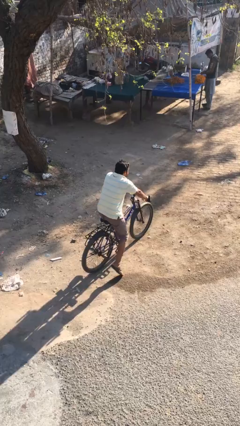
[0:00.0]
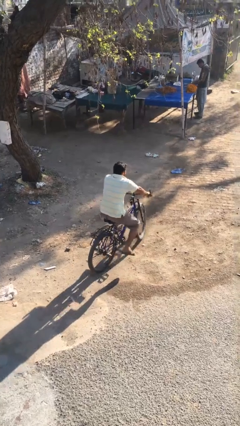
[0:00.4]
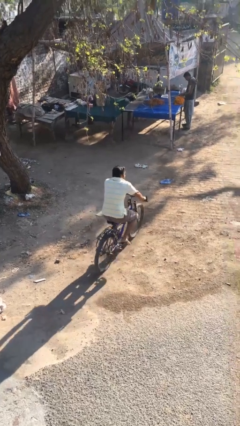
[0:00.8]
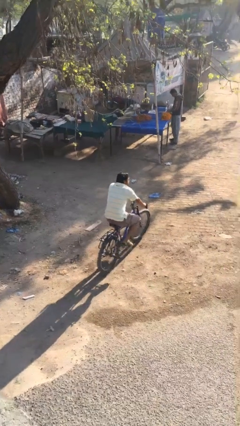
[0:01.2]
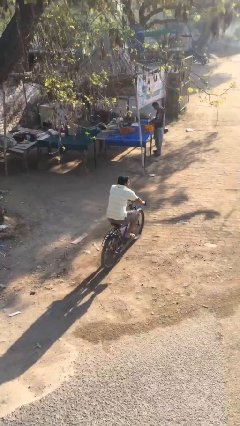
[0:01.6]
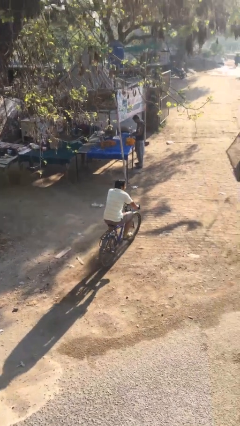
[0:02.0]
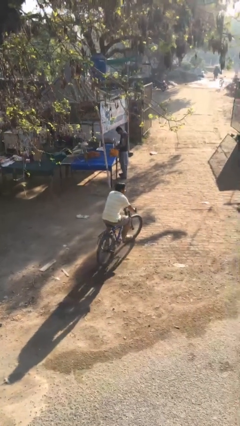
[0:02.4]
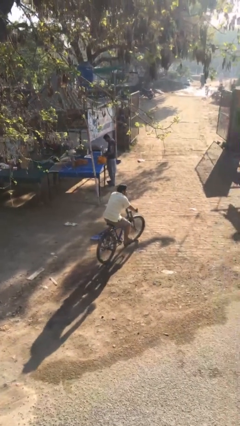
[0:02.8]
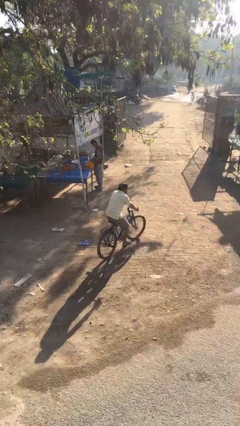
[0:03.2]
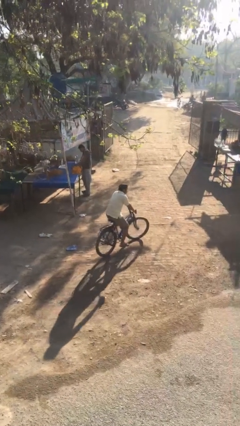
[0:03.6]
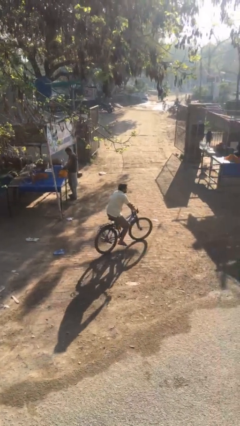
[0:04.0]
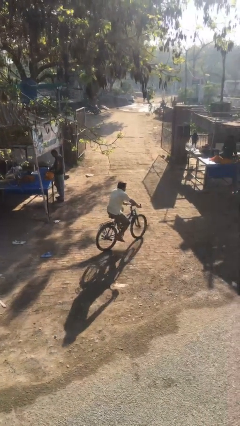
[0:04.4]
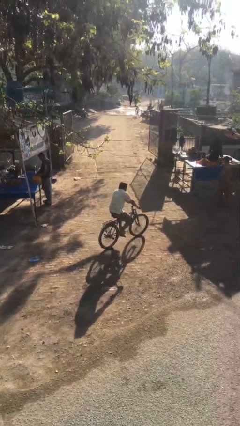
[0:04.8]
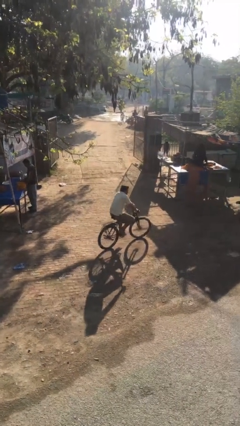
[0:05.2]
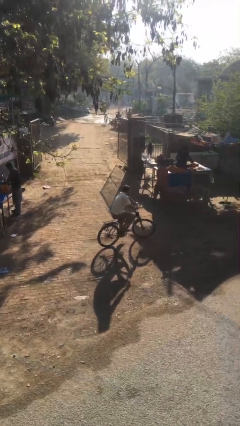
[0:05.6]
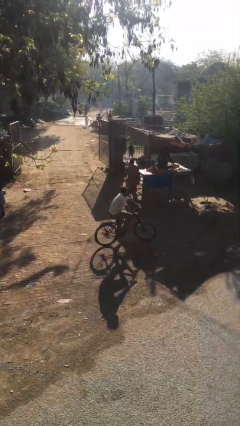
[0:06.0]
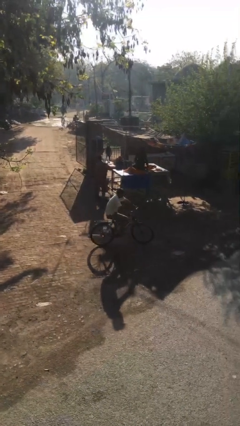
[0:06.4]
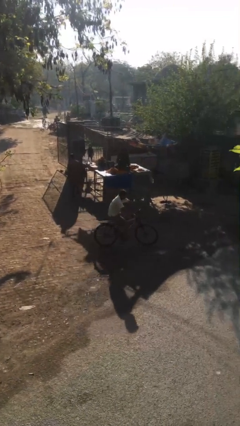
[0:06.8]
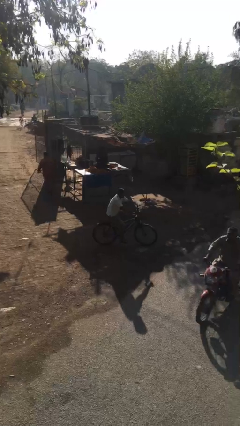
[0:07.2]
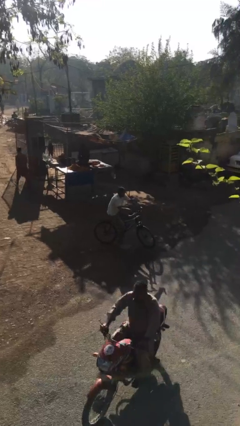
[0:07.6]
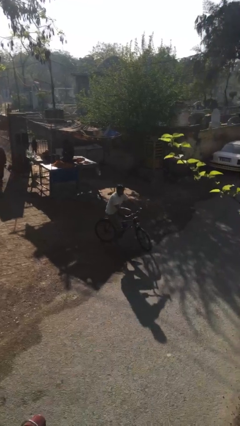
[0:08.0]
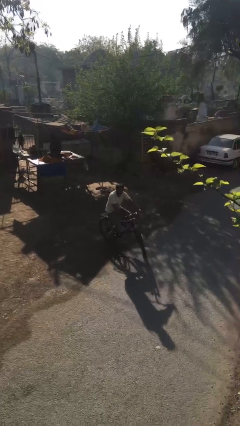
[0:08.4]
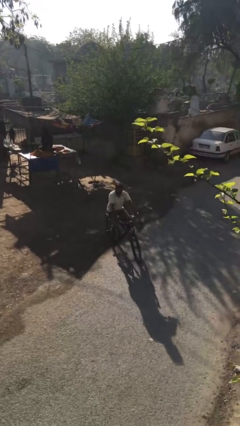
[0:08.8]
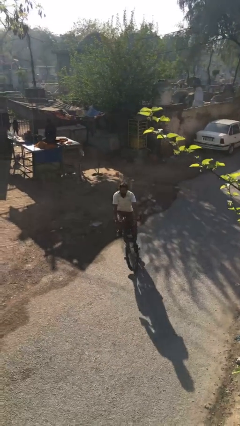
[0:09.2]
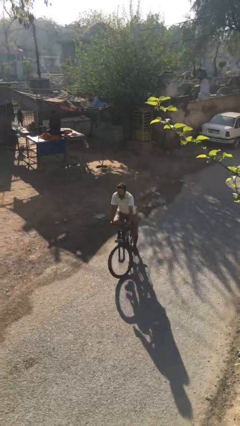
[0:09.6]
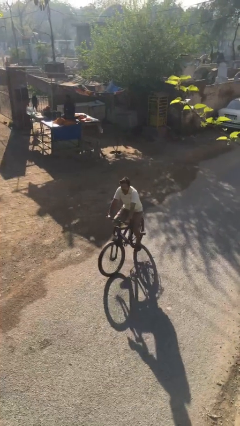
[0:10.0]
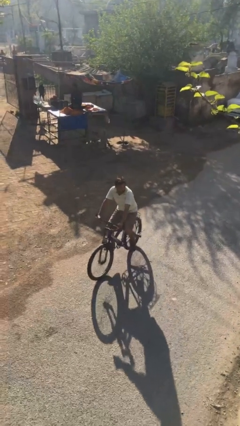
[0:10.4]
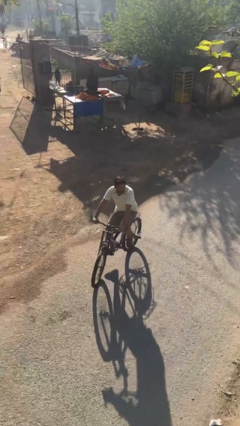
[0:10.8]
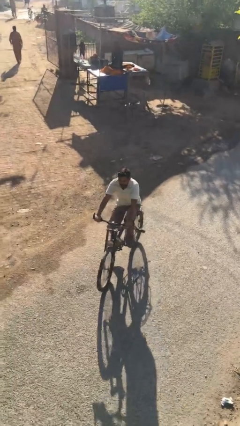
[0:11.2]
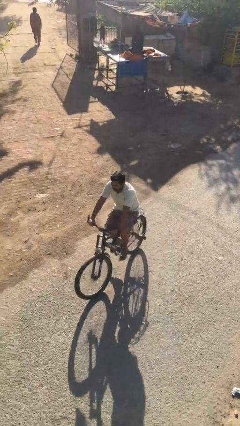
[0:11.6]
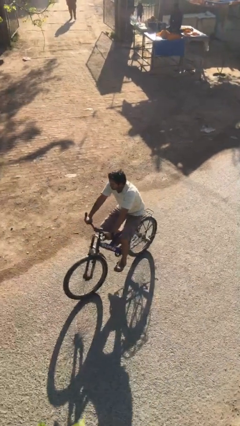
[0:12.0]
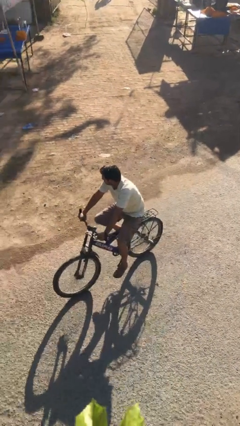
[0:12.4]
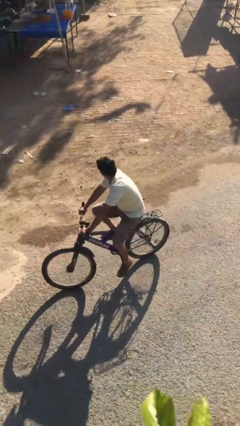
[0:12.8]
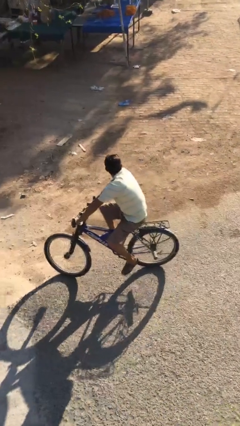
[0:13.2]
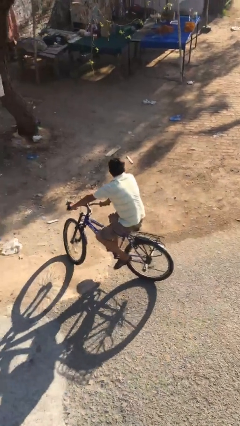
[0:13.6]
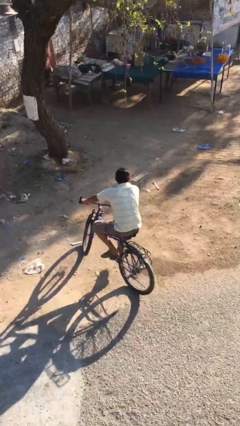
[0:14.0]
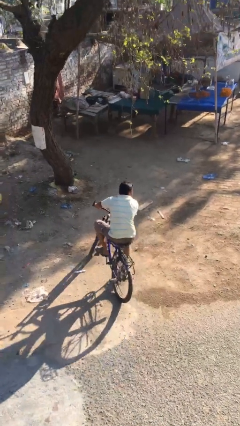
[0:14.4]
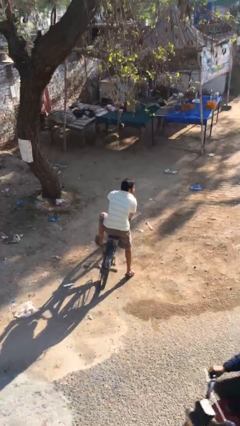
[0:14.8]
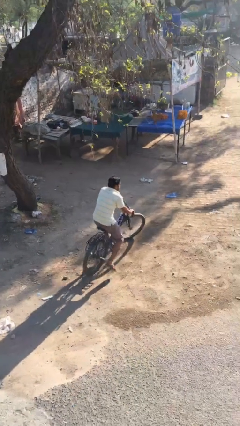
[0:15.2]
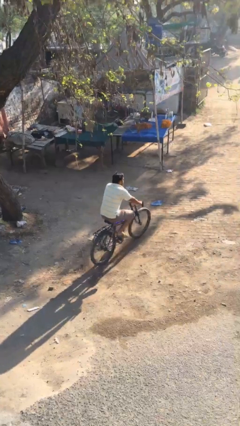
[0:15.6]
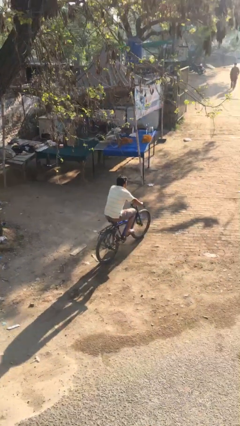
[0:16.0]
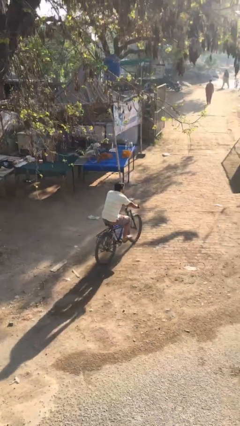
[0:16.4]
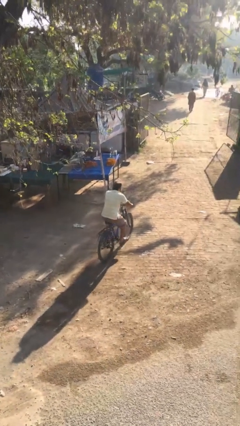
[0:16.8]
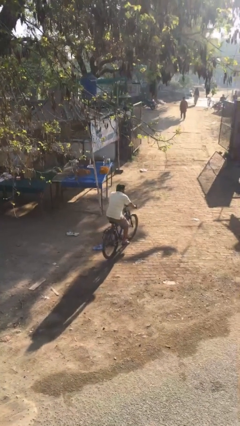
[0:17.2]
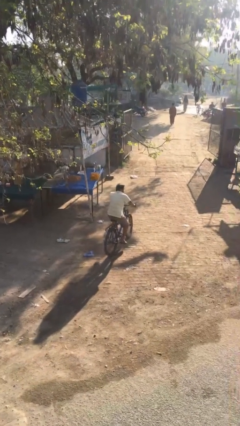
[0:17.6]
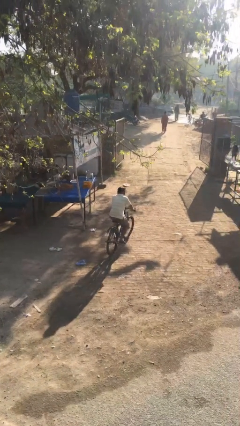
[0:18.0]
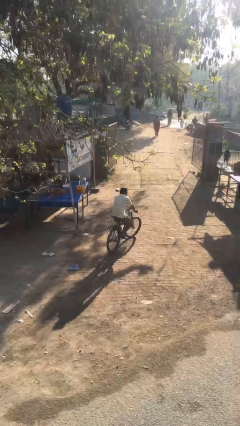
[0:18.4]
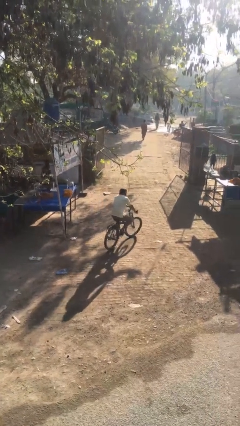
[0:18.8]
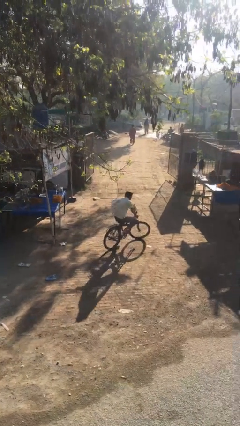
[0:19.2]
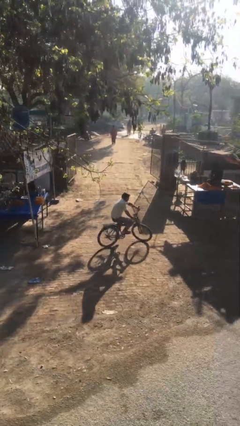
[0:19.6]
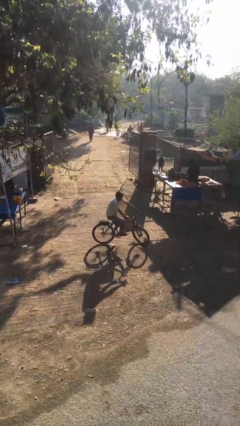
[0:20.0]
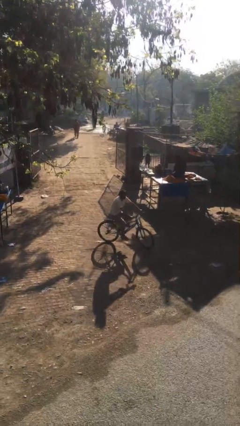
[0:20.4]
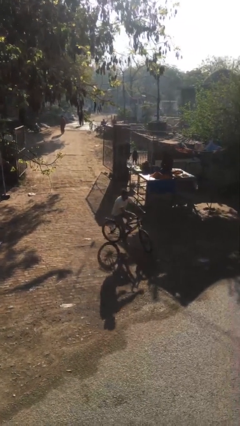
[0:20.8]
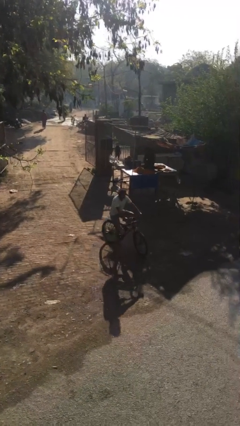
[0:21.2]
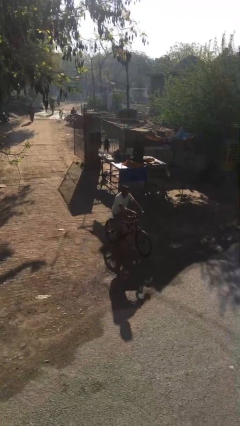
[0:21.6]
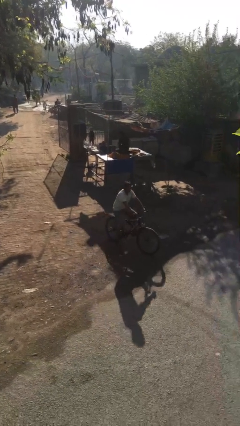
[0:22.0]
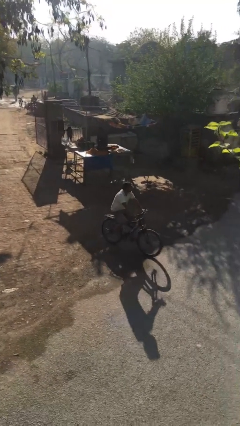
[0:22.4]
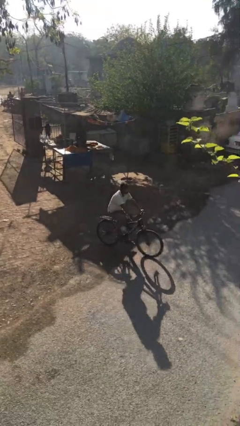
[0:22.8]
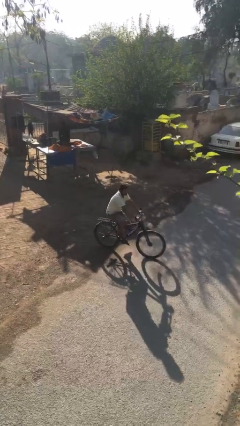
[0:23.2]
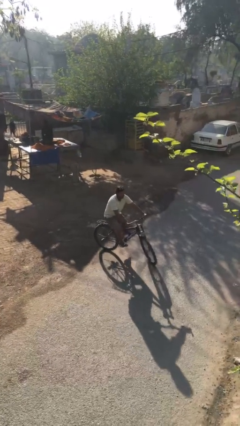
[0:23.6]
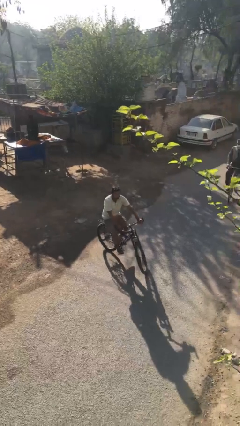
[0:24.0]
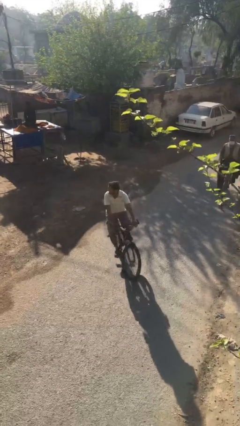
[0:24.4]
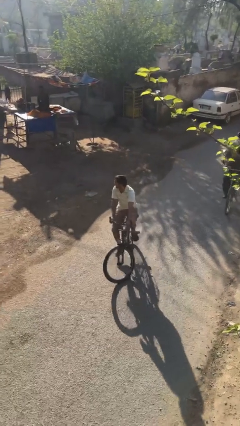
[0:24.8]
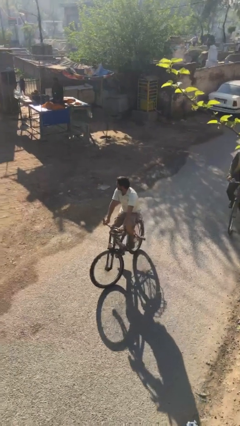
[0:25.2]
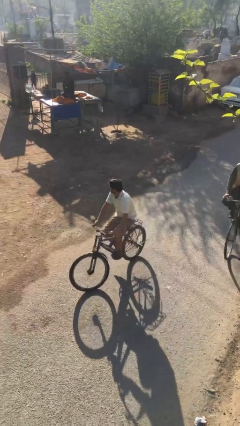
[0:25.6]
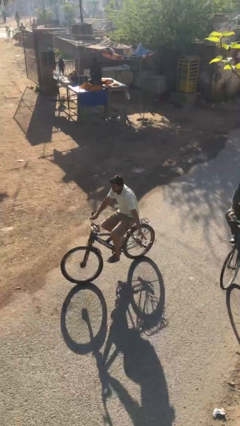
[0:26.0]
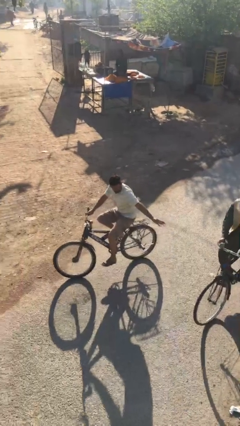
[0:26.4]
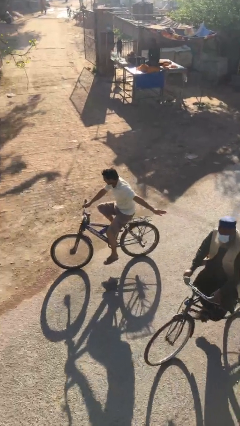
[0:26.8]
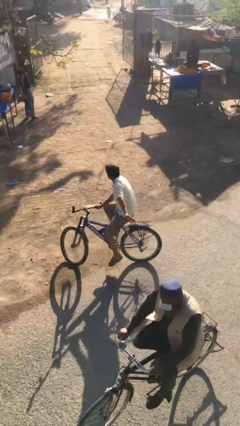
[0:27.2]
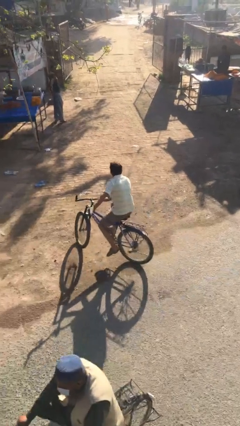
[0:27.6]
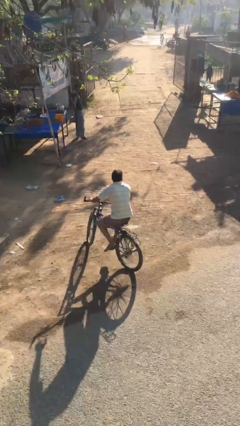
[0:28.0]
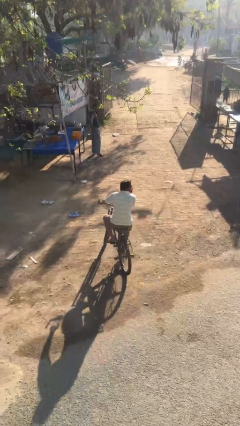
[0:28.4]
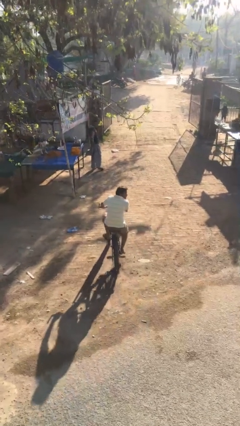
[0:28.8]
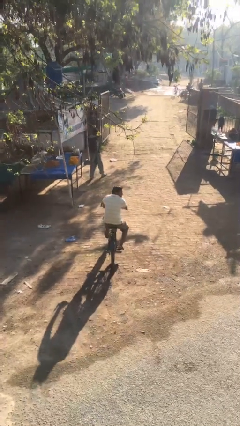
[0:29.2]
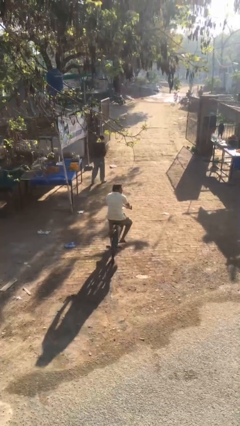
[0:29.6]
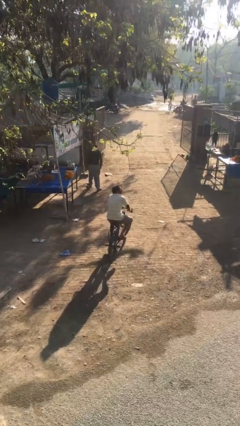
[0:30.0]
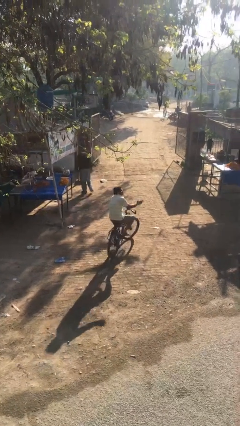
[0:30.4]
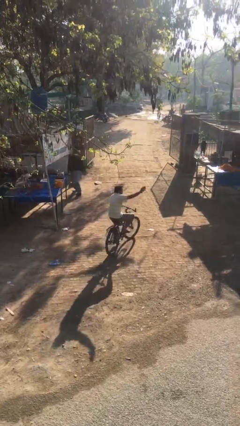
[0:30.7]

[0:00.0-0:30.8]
person rides bicycle

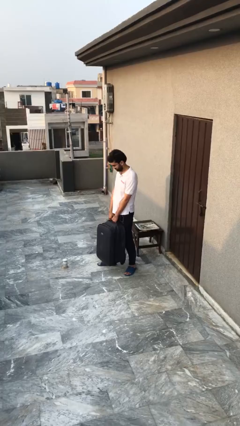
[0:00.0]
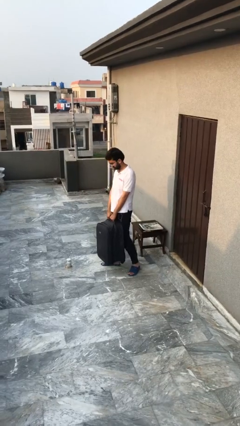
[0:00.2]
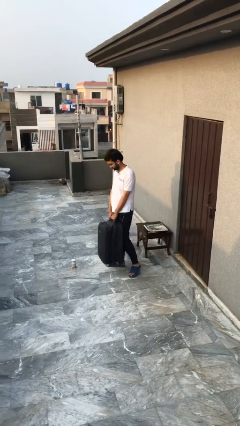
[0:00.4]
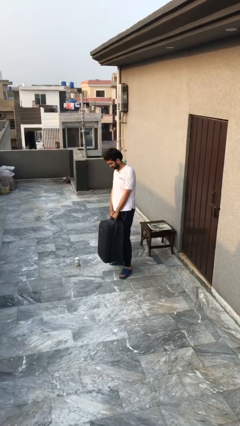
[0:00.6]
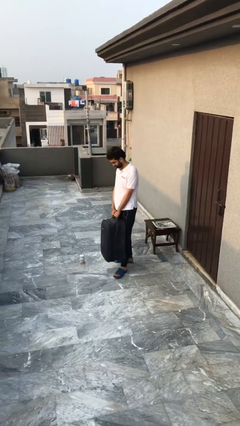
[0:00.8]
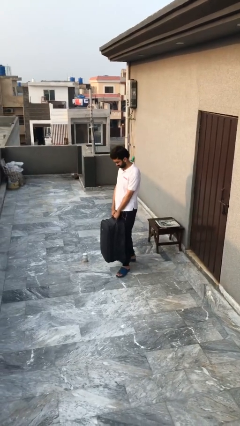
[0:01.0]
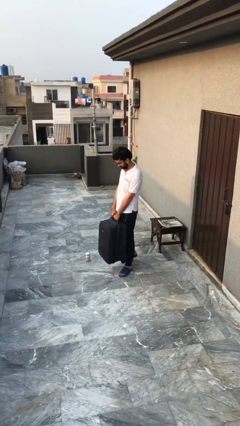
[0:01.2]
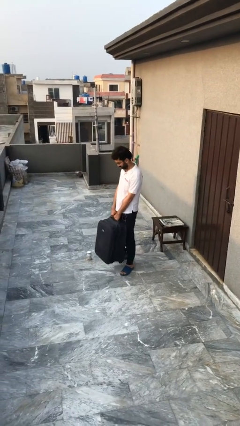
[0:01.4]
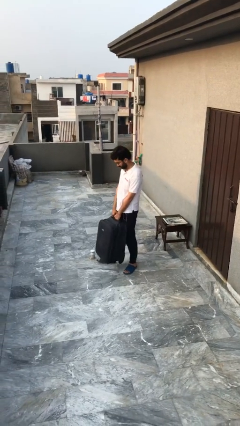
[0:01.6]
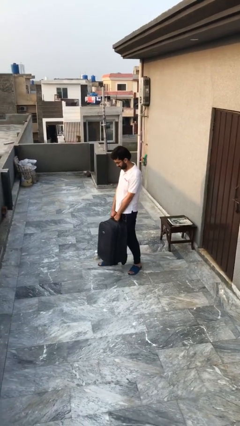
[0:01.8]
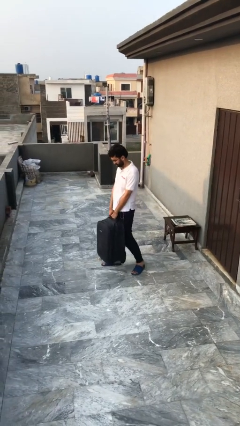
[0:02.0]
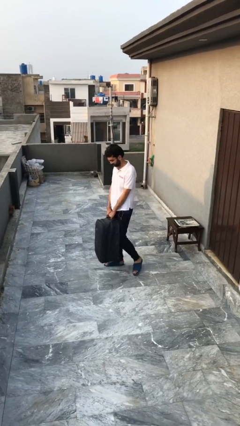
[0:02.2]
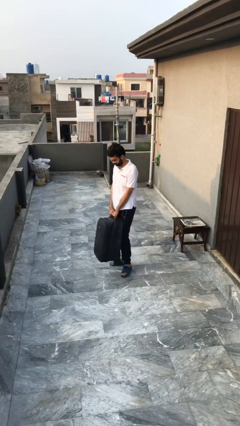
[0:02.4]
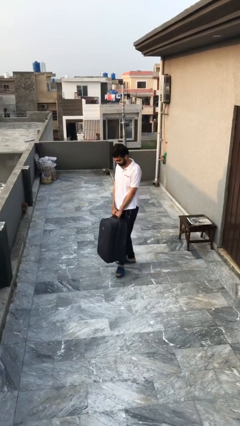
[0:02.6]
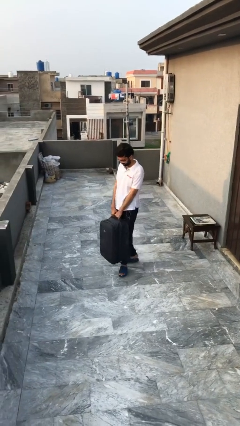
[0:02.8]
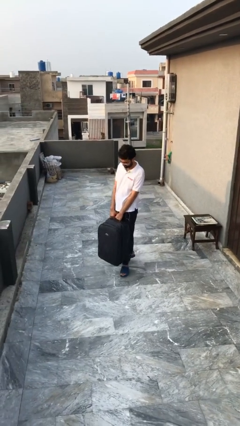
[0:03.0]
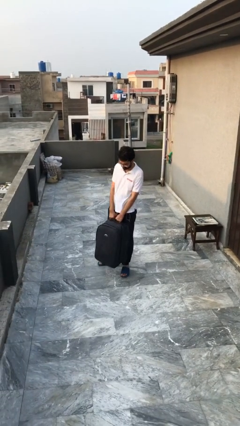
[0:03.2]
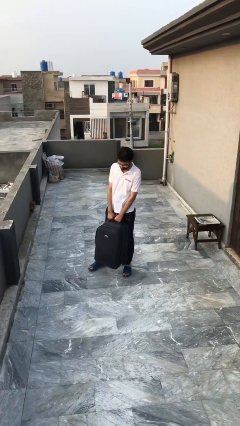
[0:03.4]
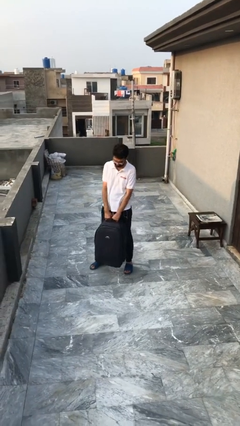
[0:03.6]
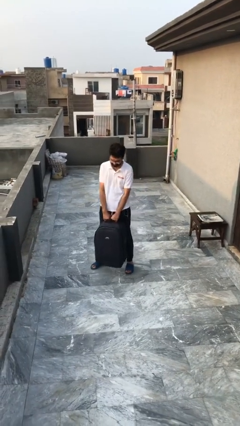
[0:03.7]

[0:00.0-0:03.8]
person carries heavy object
